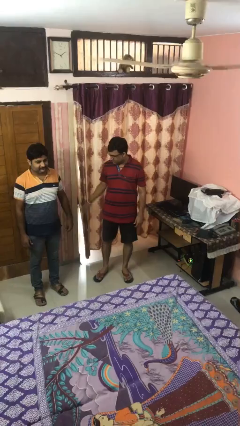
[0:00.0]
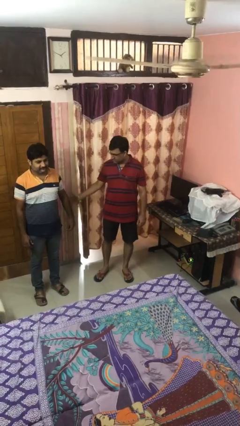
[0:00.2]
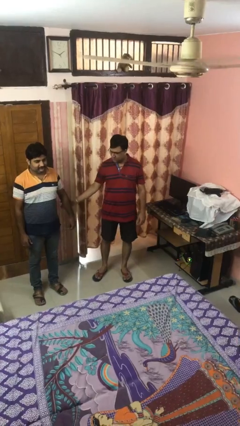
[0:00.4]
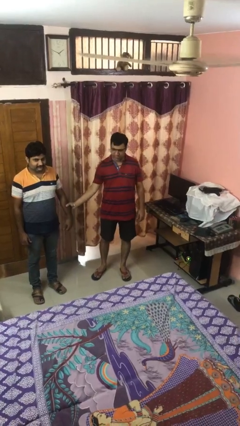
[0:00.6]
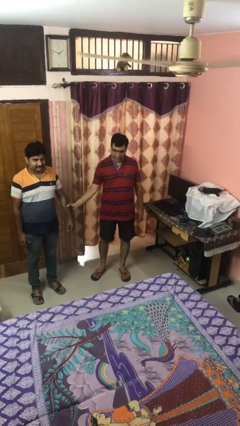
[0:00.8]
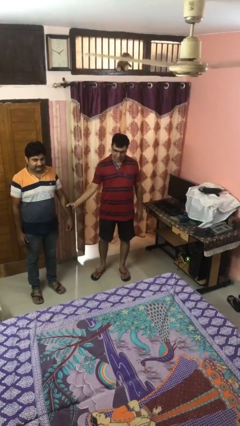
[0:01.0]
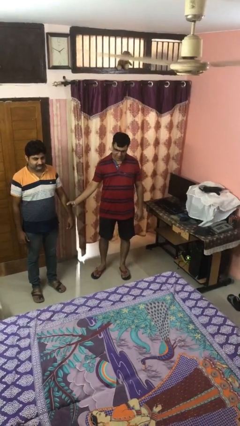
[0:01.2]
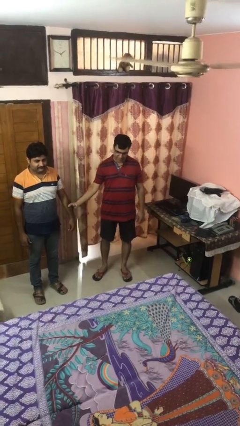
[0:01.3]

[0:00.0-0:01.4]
person grabs person by forearm

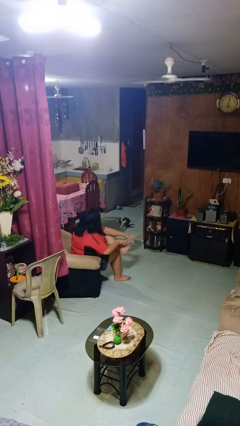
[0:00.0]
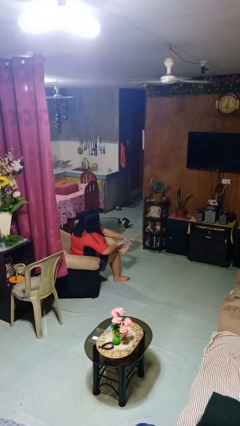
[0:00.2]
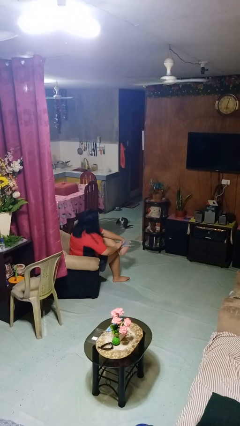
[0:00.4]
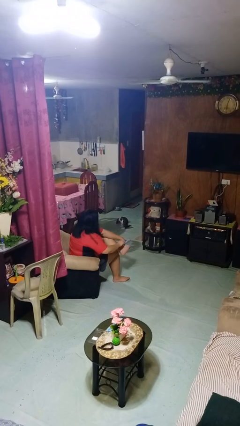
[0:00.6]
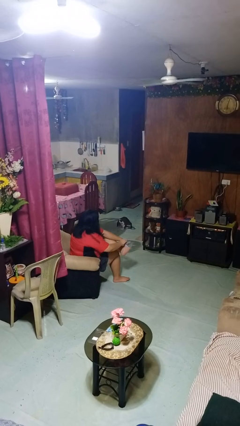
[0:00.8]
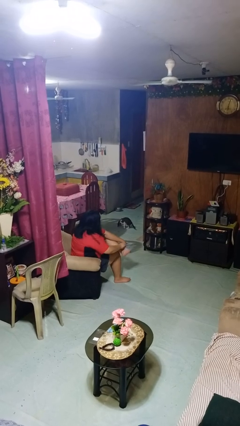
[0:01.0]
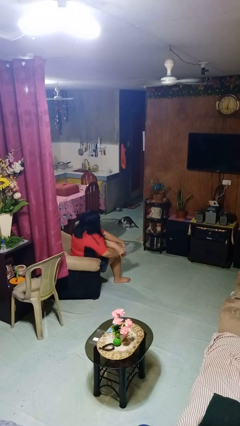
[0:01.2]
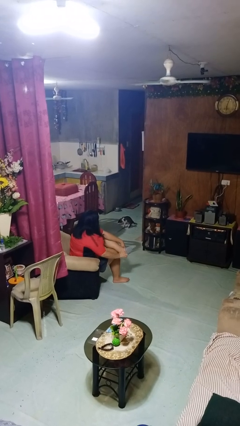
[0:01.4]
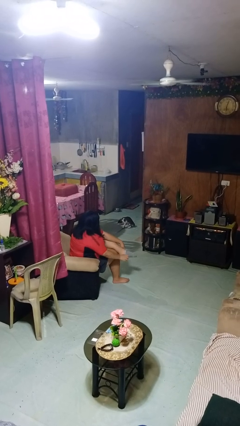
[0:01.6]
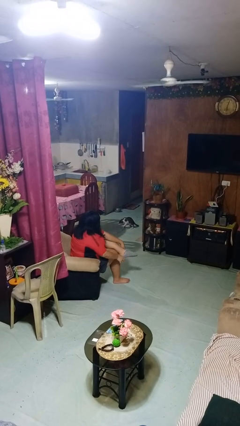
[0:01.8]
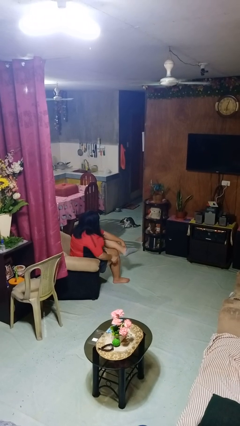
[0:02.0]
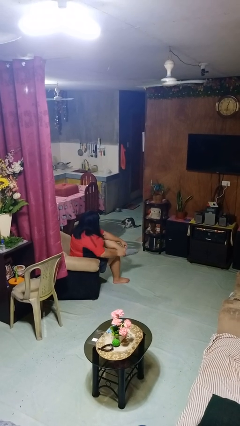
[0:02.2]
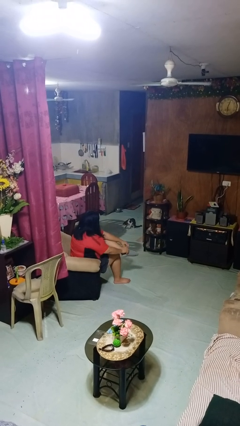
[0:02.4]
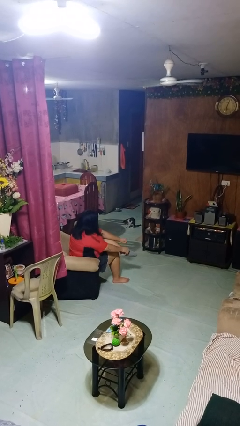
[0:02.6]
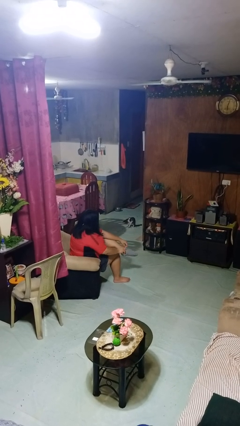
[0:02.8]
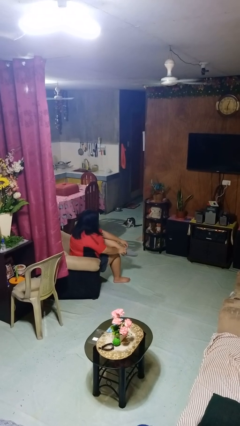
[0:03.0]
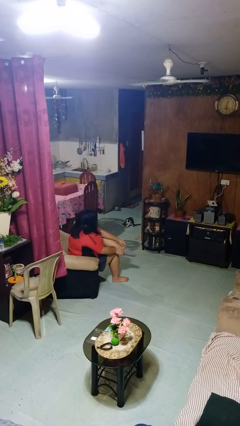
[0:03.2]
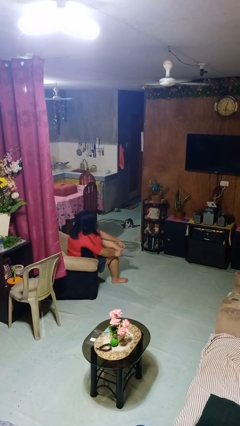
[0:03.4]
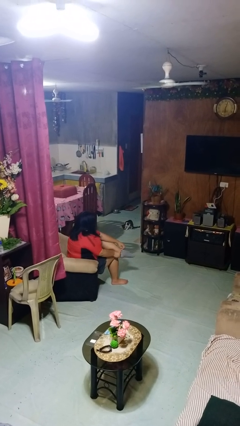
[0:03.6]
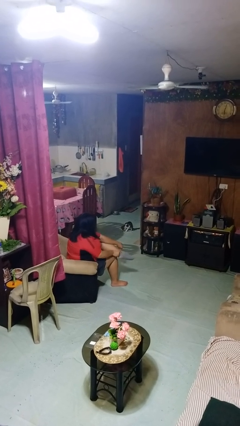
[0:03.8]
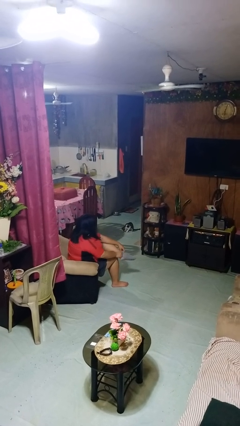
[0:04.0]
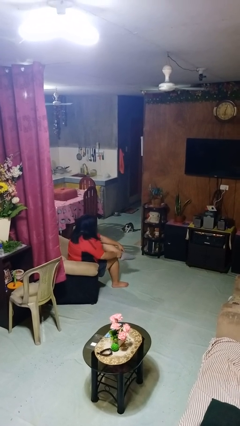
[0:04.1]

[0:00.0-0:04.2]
person puts on socks

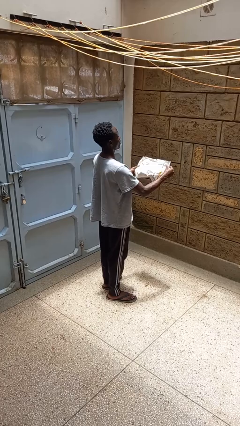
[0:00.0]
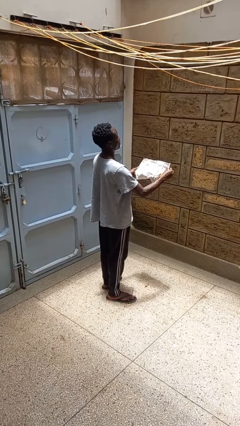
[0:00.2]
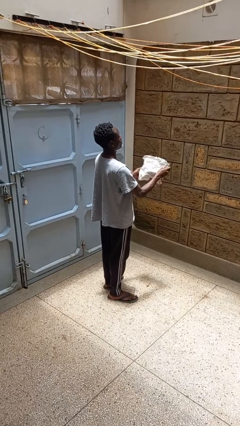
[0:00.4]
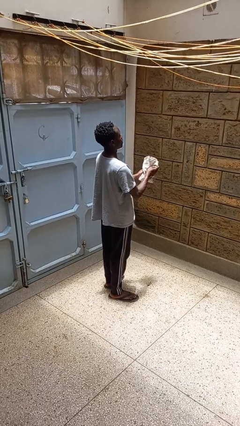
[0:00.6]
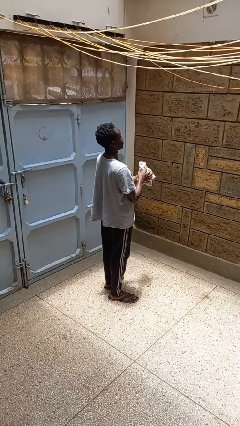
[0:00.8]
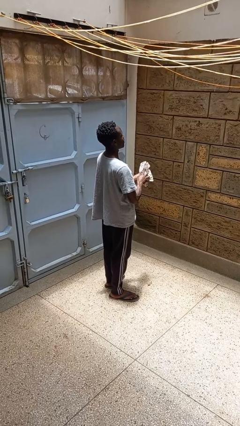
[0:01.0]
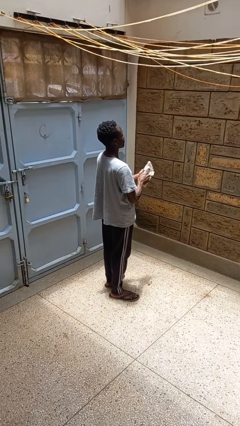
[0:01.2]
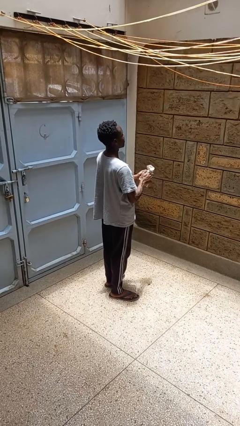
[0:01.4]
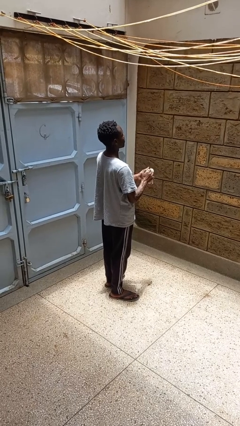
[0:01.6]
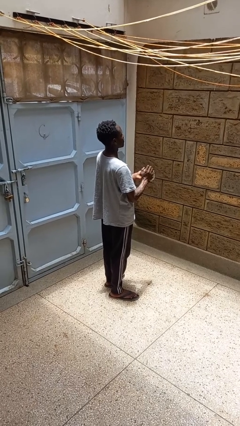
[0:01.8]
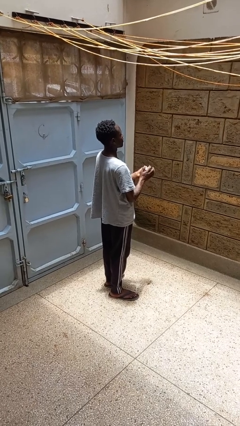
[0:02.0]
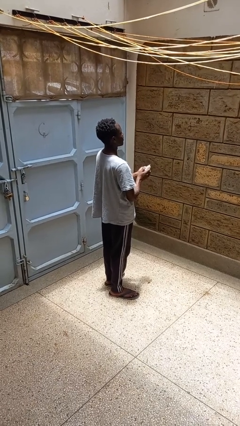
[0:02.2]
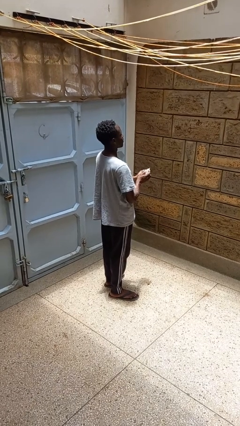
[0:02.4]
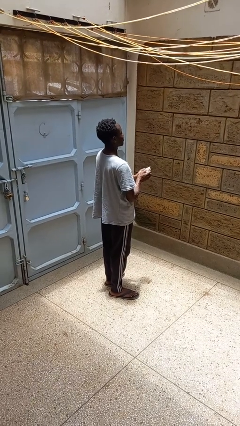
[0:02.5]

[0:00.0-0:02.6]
person crumples paper

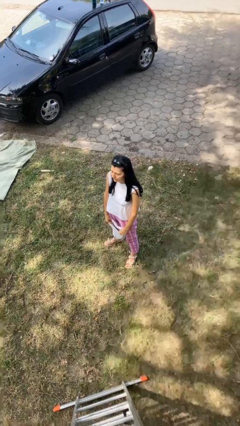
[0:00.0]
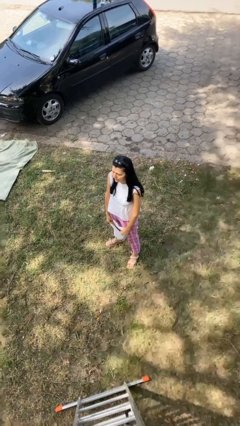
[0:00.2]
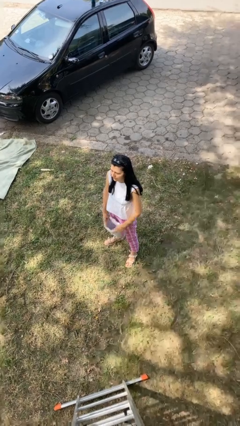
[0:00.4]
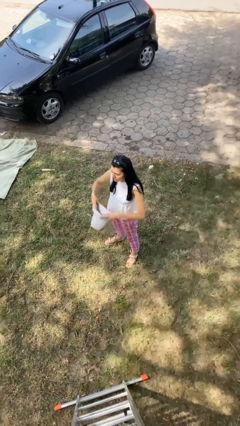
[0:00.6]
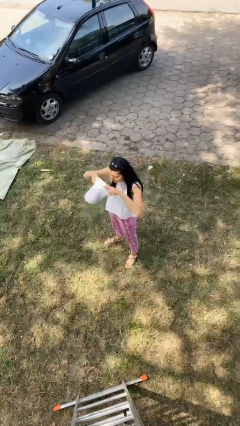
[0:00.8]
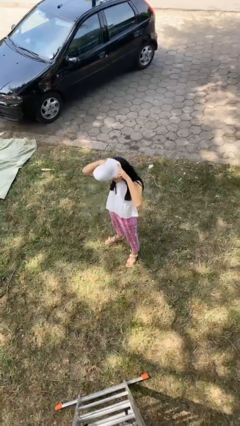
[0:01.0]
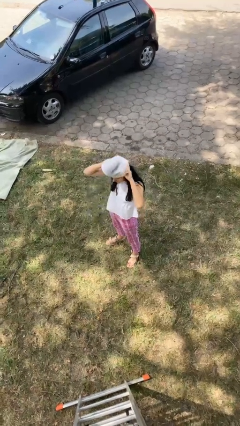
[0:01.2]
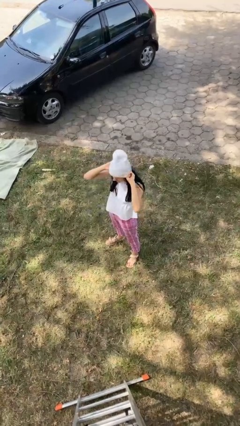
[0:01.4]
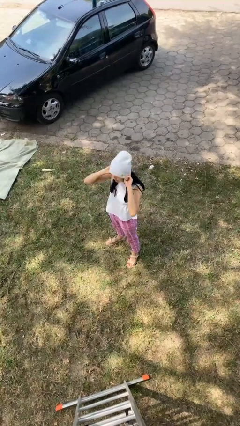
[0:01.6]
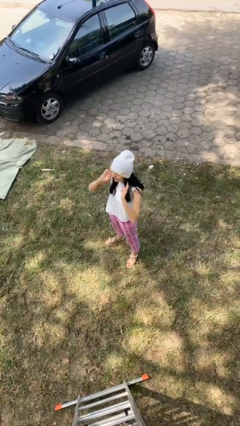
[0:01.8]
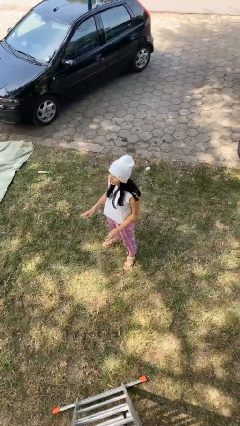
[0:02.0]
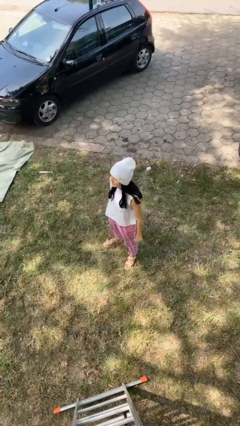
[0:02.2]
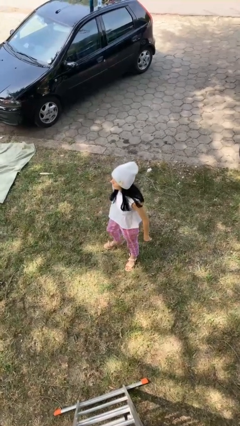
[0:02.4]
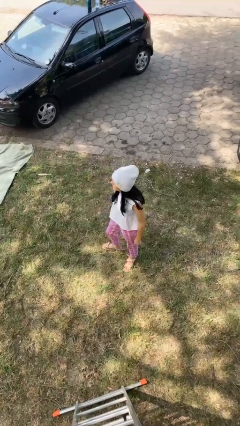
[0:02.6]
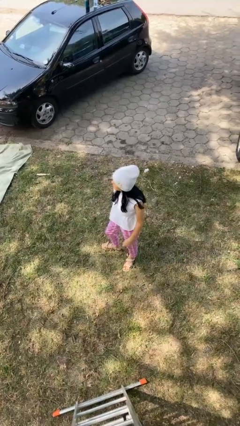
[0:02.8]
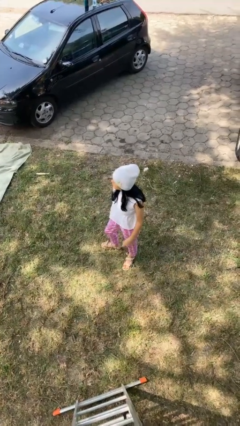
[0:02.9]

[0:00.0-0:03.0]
person puts on hat

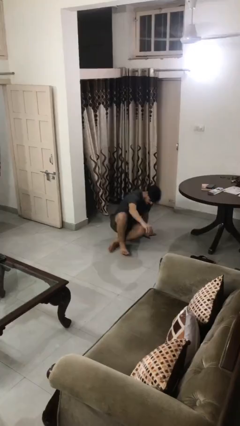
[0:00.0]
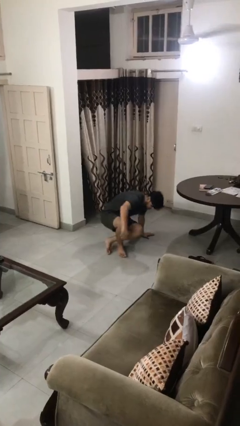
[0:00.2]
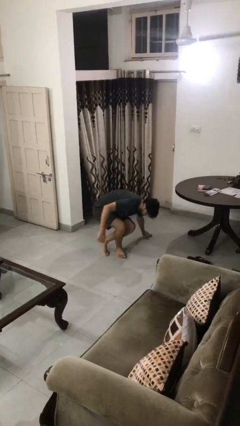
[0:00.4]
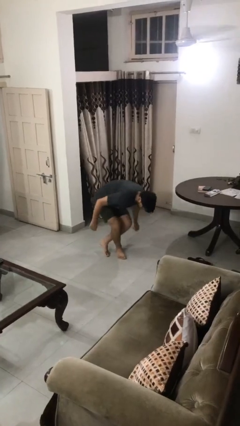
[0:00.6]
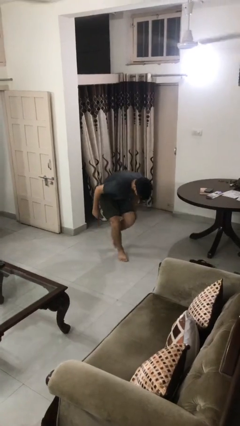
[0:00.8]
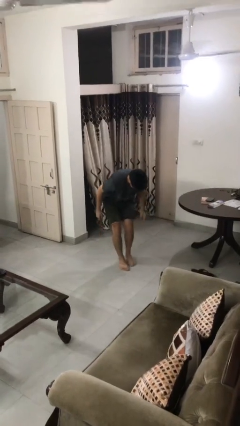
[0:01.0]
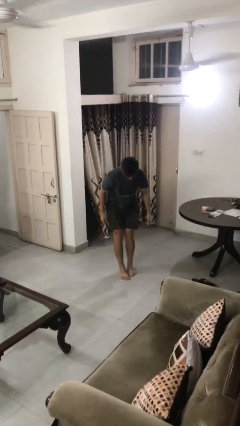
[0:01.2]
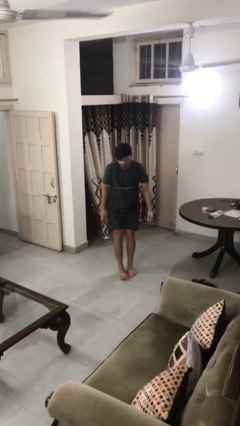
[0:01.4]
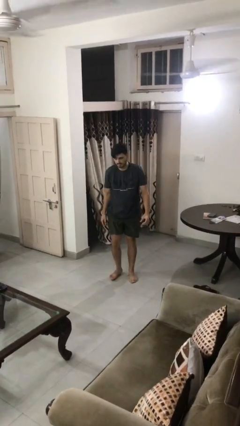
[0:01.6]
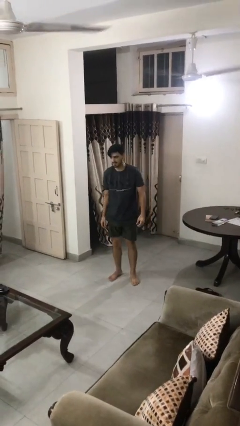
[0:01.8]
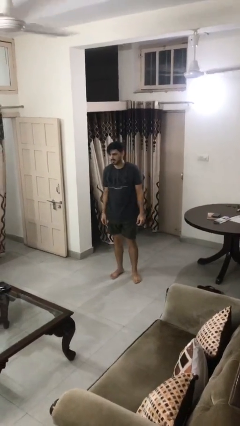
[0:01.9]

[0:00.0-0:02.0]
person stands up from floor

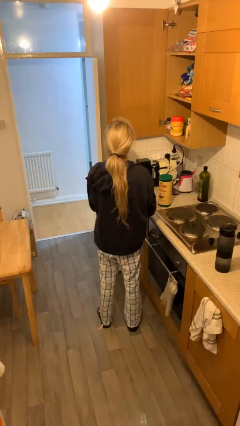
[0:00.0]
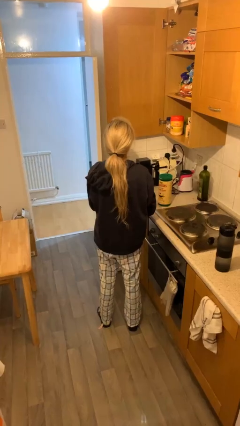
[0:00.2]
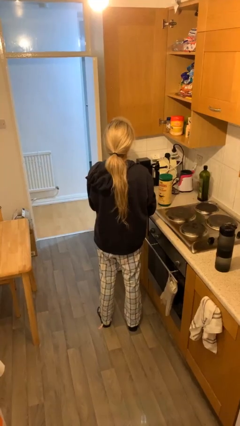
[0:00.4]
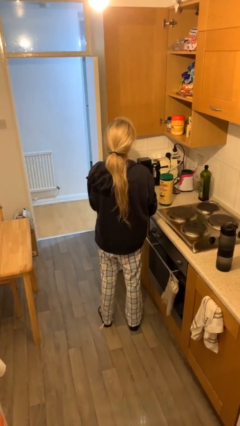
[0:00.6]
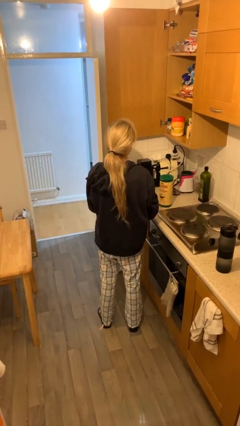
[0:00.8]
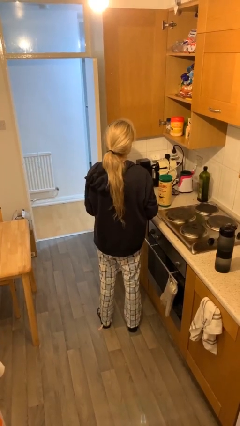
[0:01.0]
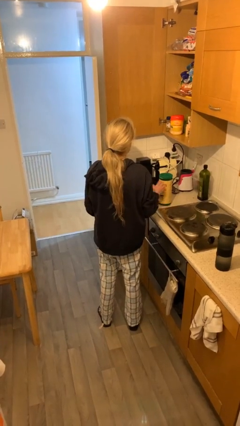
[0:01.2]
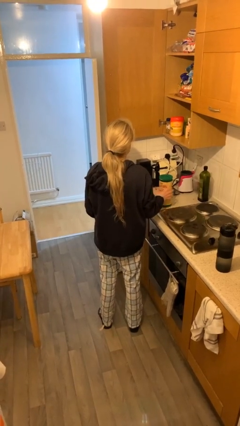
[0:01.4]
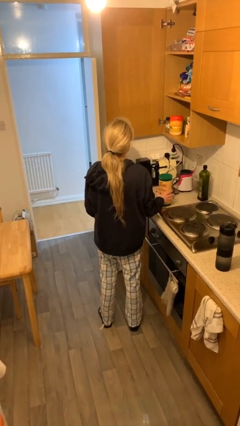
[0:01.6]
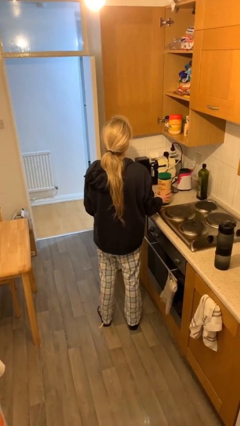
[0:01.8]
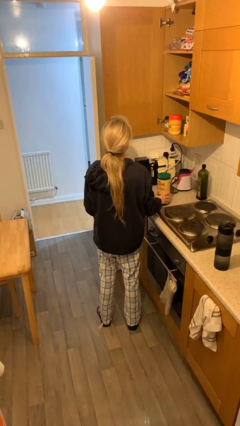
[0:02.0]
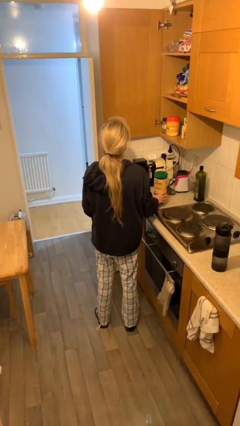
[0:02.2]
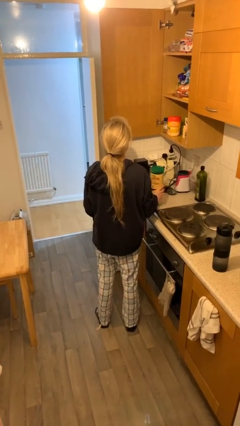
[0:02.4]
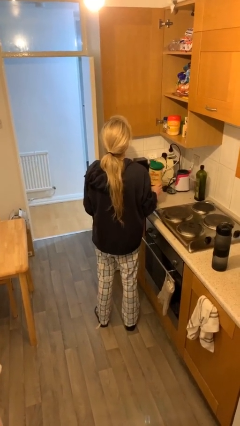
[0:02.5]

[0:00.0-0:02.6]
person picks up object from table

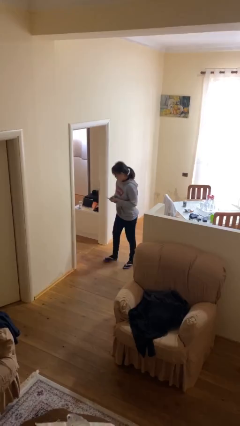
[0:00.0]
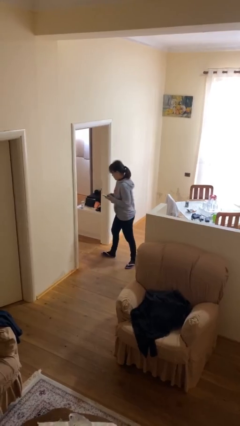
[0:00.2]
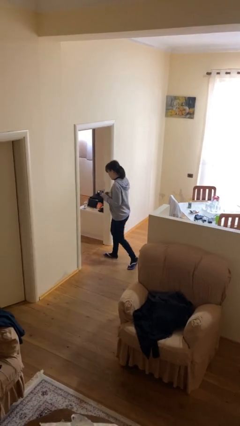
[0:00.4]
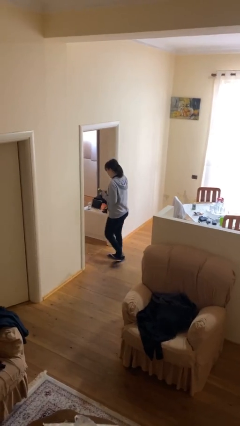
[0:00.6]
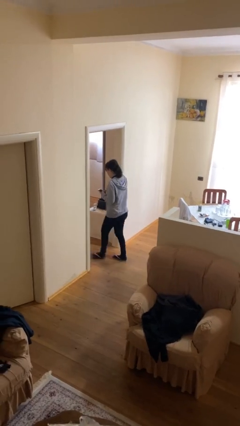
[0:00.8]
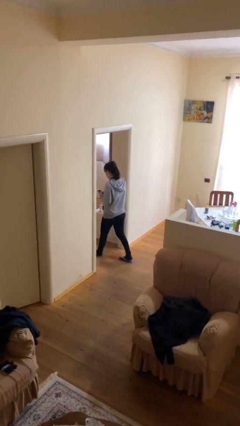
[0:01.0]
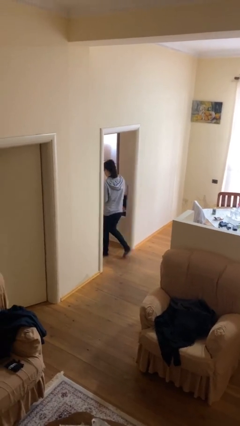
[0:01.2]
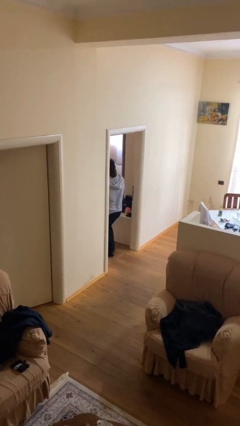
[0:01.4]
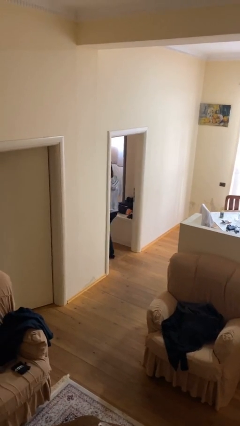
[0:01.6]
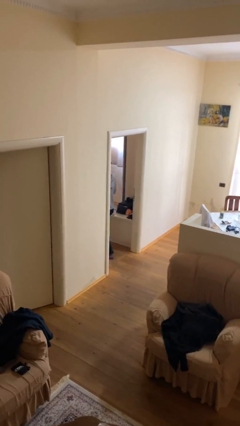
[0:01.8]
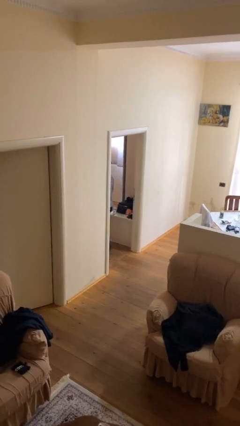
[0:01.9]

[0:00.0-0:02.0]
person exits scene through structure
